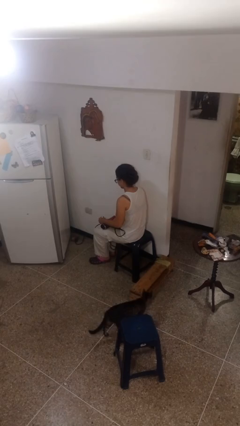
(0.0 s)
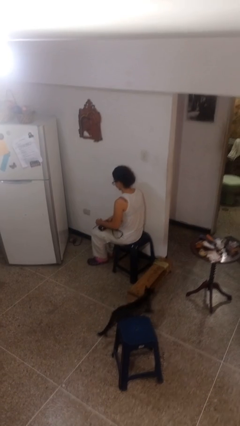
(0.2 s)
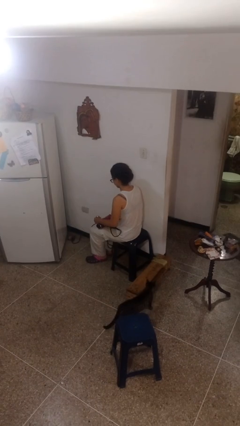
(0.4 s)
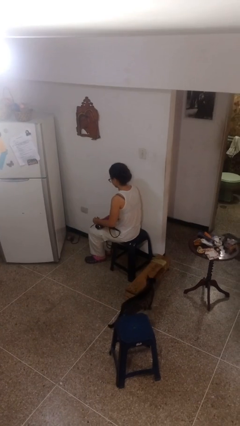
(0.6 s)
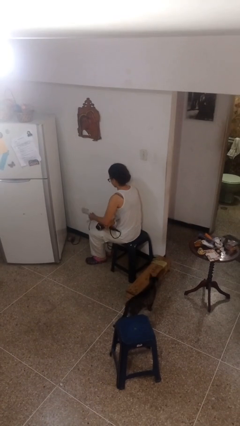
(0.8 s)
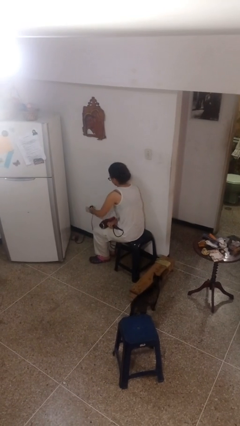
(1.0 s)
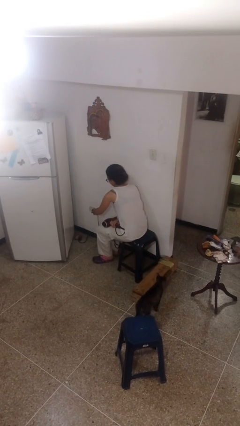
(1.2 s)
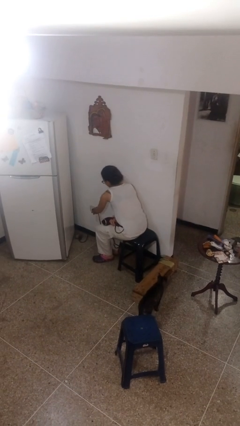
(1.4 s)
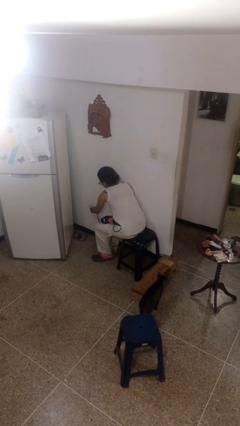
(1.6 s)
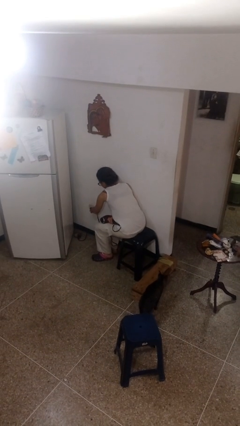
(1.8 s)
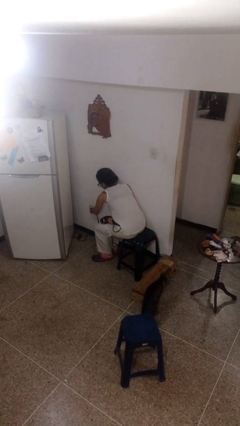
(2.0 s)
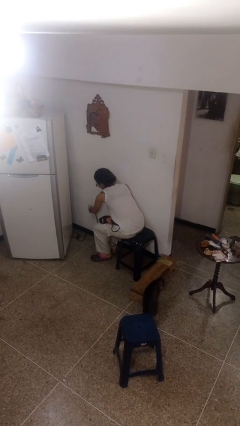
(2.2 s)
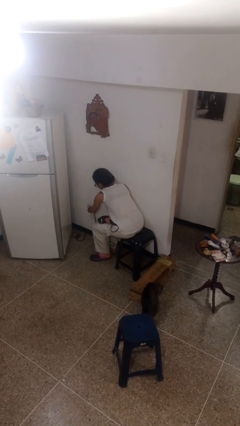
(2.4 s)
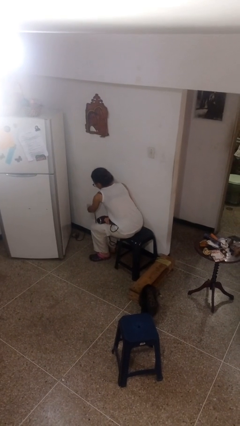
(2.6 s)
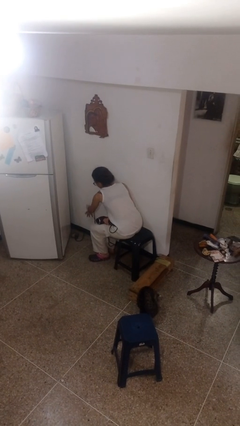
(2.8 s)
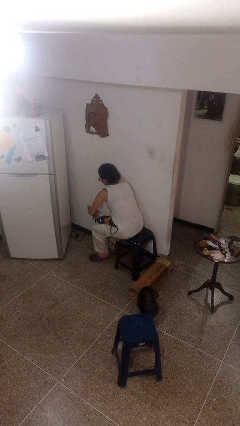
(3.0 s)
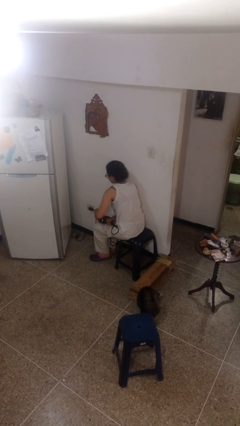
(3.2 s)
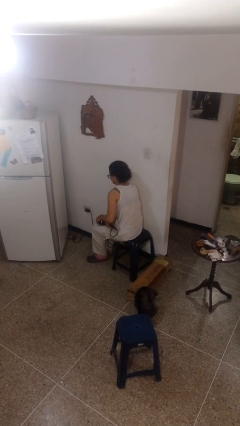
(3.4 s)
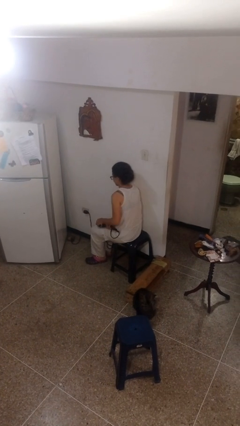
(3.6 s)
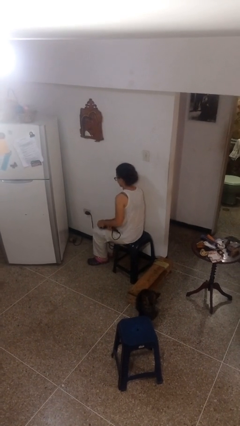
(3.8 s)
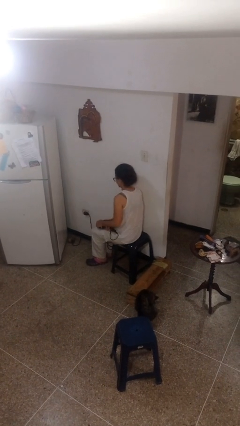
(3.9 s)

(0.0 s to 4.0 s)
person plugs into electrical socket

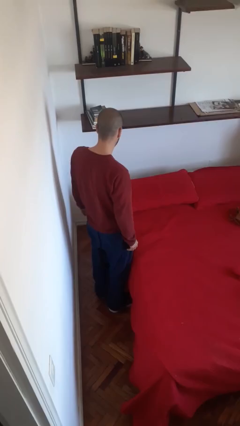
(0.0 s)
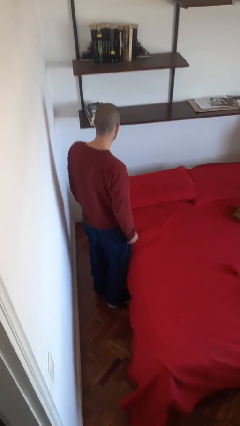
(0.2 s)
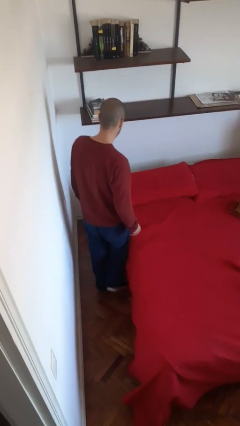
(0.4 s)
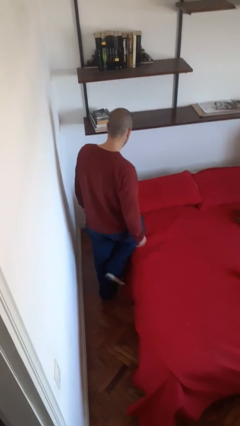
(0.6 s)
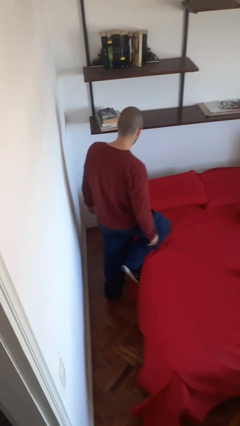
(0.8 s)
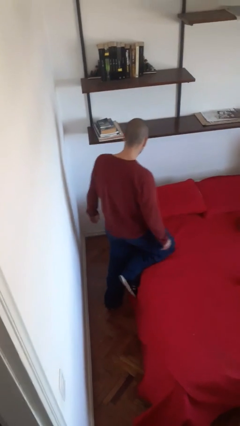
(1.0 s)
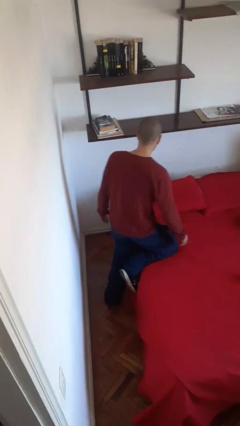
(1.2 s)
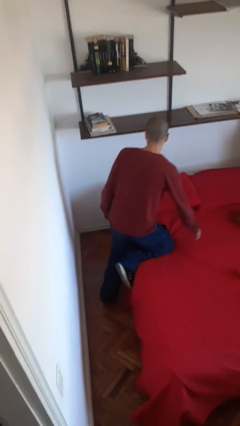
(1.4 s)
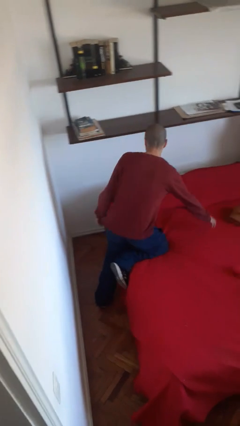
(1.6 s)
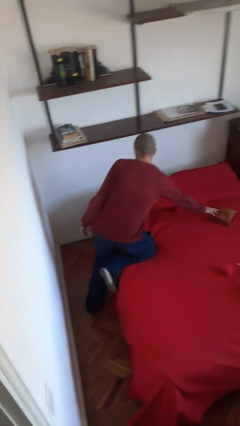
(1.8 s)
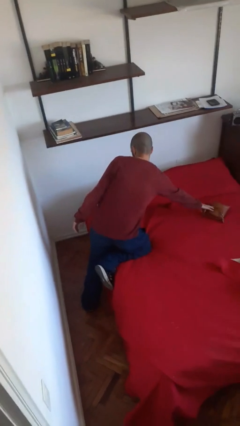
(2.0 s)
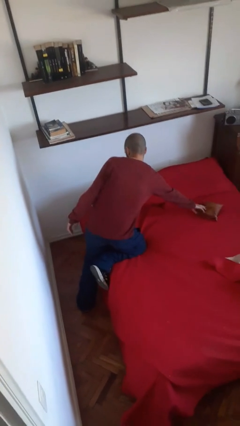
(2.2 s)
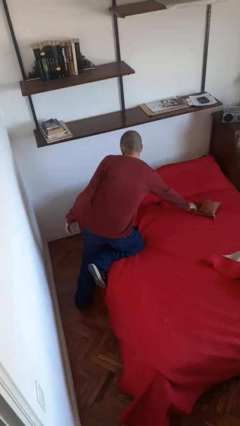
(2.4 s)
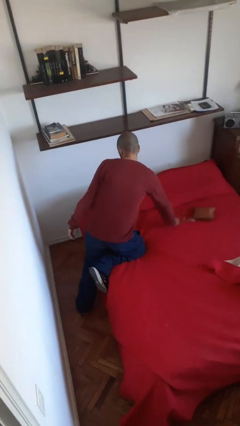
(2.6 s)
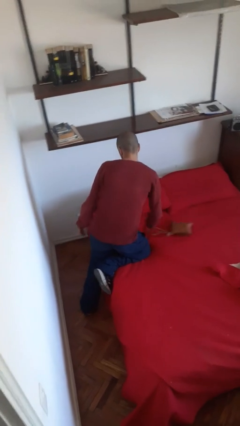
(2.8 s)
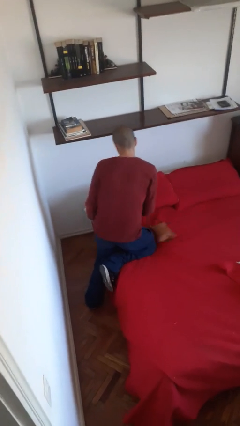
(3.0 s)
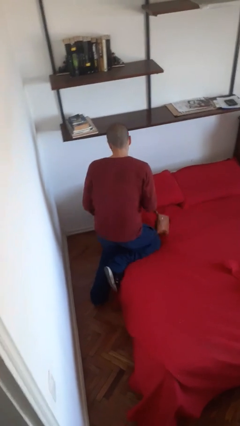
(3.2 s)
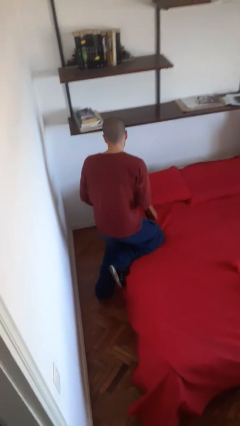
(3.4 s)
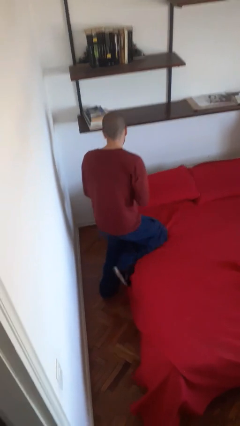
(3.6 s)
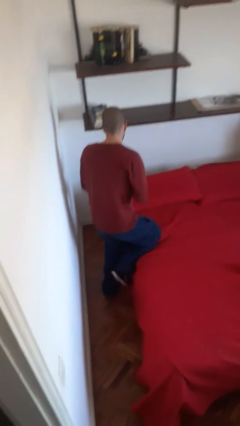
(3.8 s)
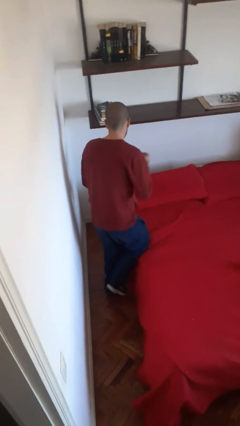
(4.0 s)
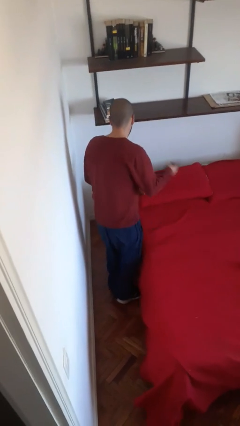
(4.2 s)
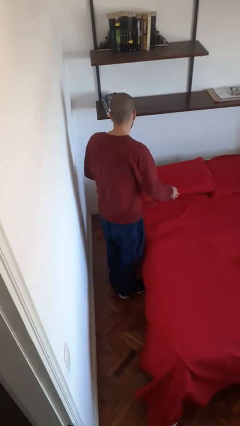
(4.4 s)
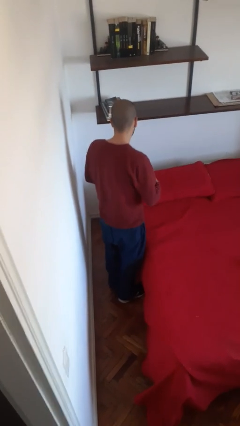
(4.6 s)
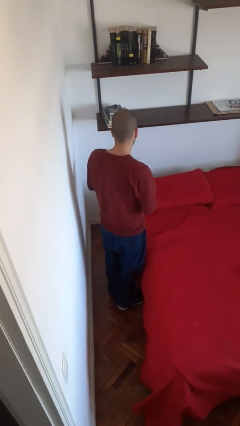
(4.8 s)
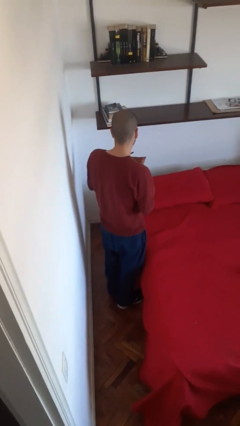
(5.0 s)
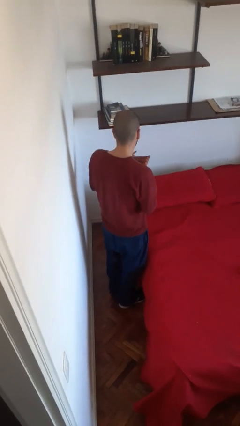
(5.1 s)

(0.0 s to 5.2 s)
person picks up object from bed

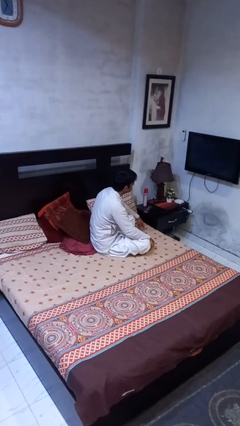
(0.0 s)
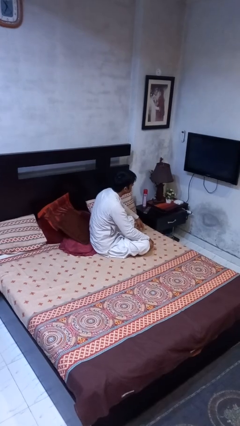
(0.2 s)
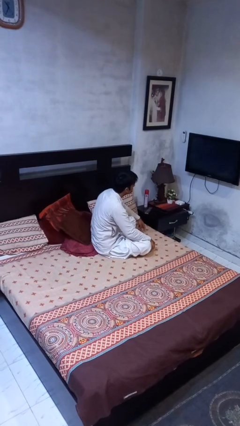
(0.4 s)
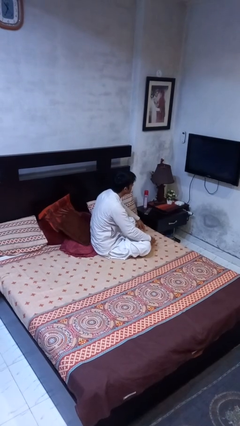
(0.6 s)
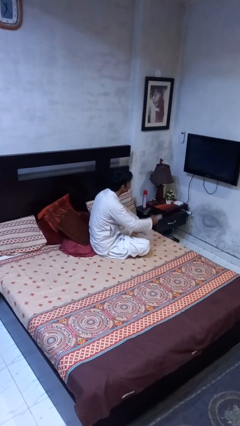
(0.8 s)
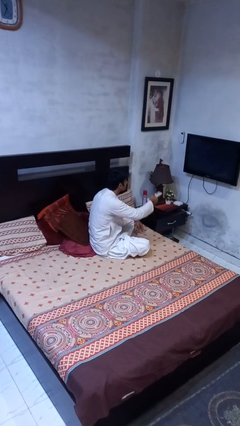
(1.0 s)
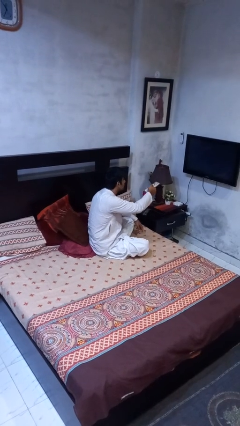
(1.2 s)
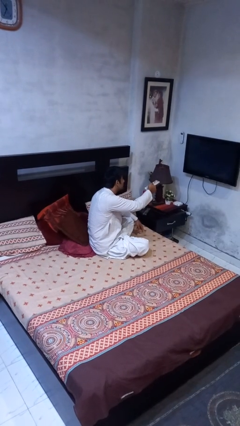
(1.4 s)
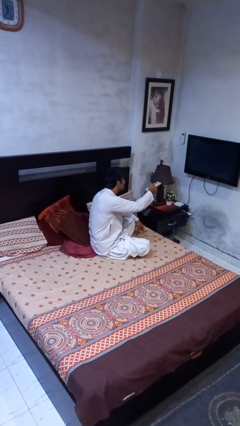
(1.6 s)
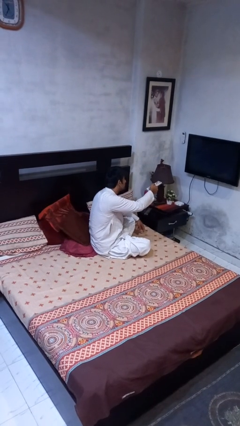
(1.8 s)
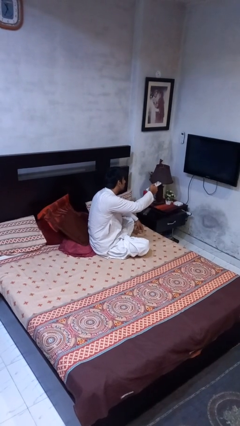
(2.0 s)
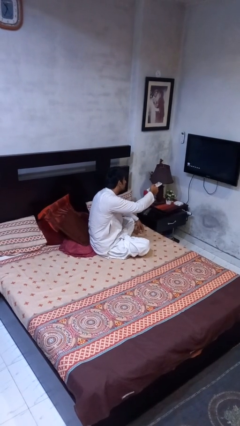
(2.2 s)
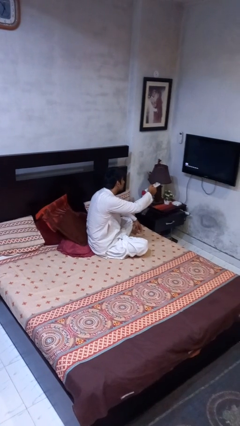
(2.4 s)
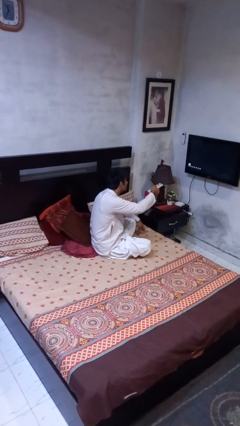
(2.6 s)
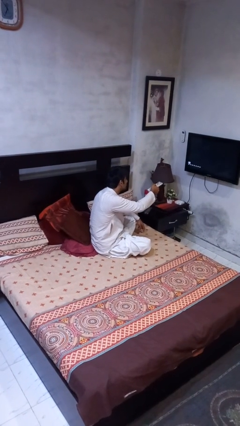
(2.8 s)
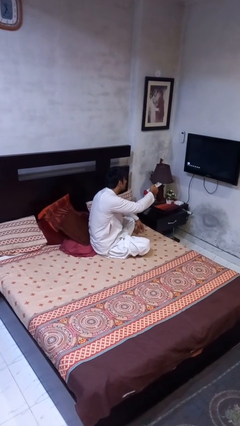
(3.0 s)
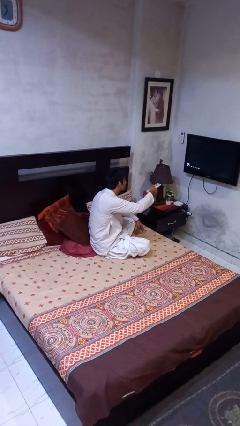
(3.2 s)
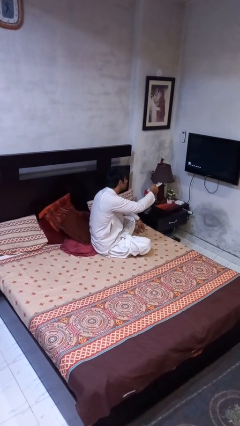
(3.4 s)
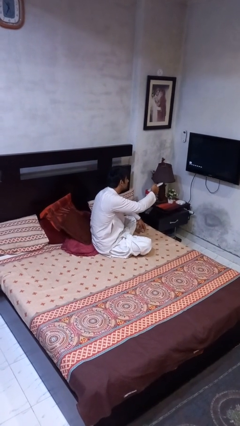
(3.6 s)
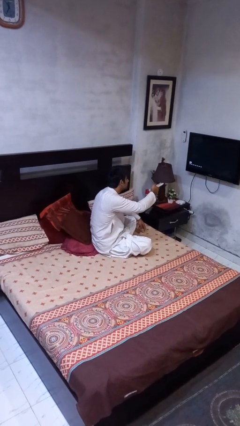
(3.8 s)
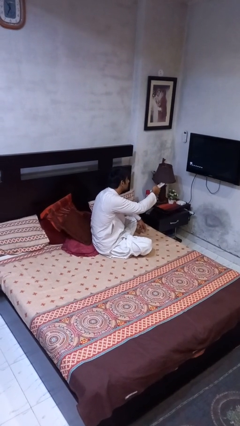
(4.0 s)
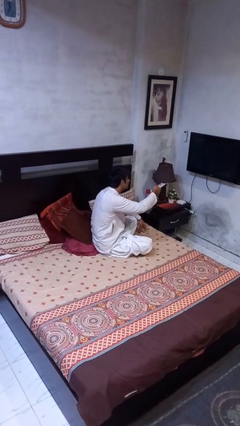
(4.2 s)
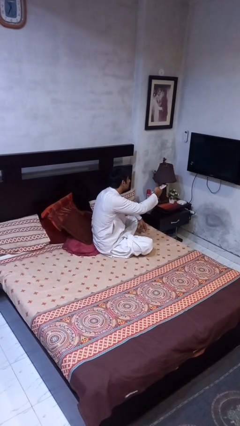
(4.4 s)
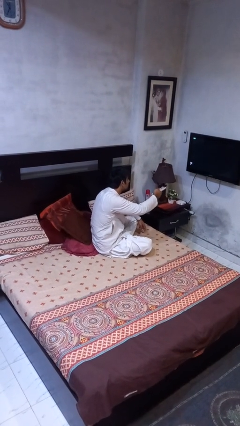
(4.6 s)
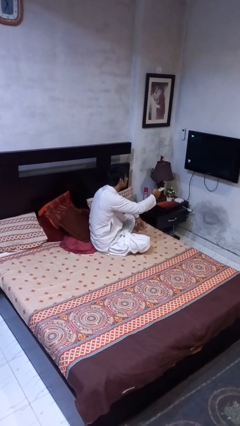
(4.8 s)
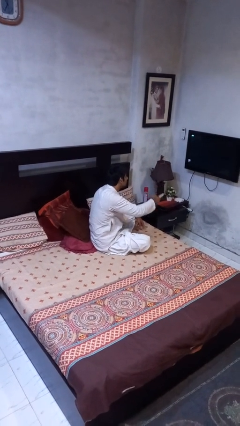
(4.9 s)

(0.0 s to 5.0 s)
person uses television remote

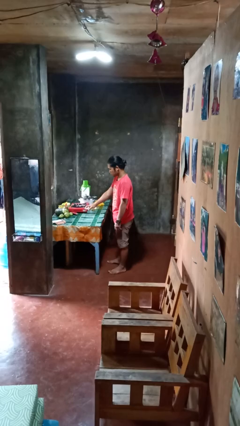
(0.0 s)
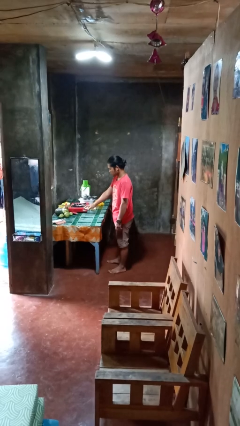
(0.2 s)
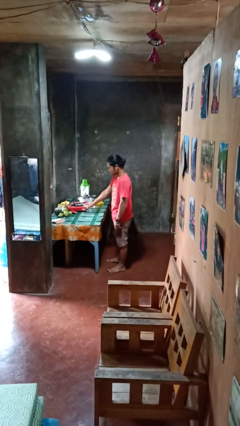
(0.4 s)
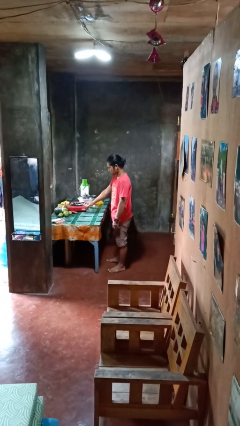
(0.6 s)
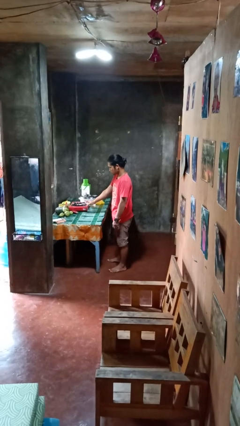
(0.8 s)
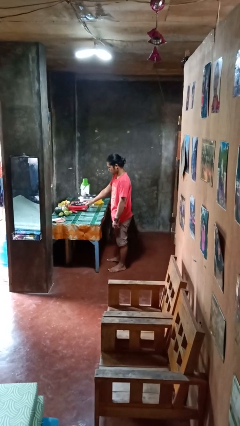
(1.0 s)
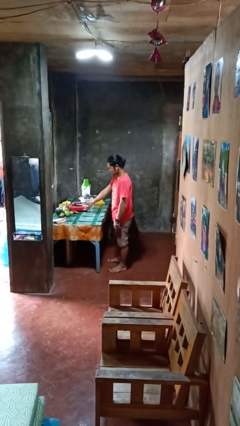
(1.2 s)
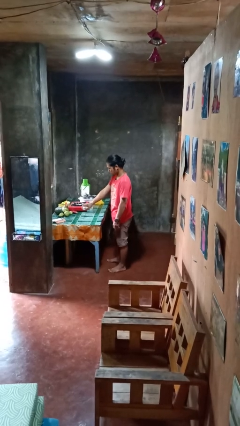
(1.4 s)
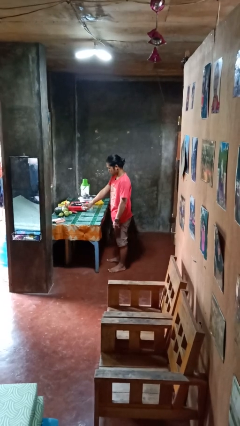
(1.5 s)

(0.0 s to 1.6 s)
person sprays from bottle

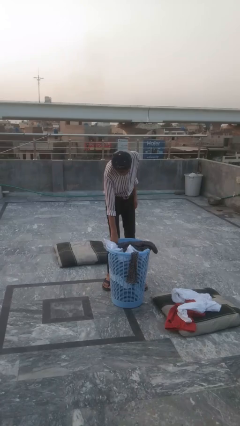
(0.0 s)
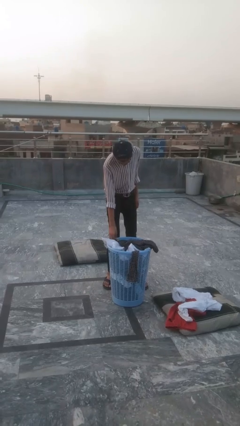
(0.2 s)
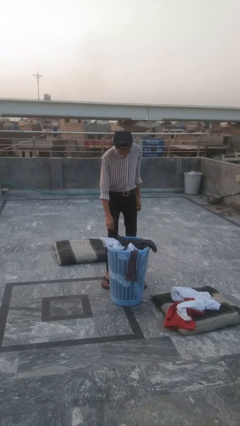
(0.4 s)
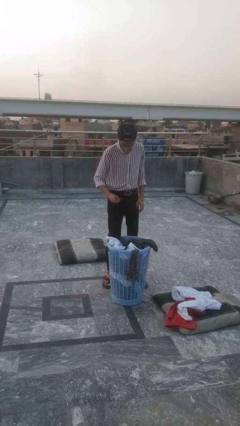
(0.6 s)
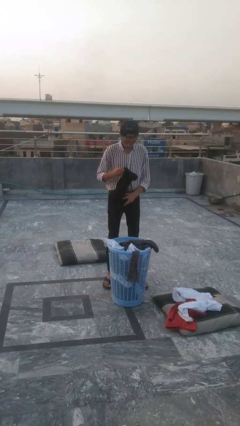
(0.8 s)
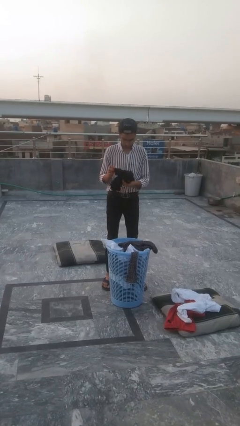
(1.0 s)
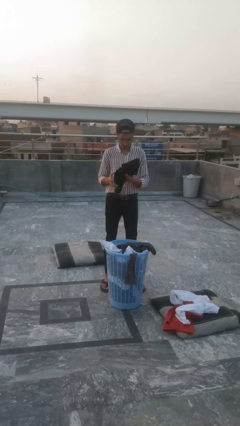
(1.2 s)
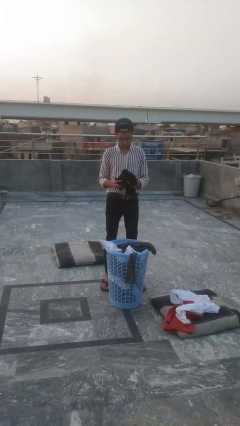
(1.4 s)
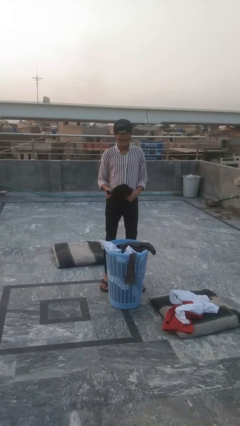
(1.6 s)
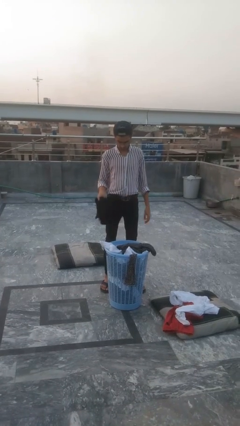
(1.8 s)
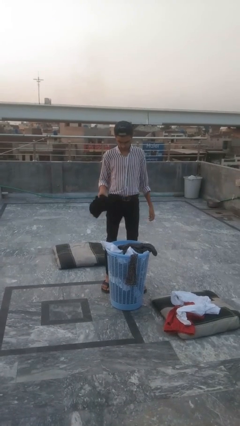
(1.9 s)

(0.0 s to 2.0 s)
person takes object from basket
